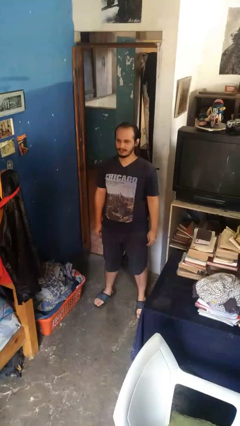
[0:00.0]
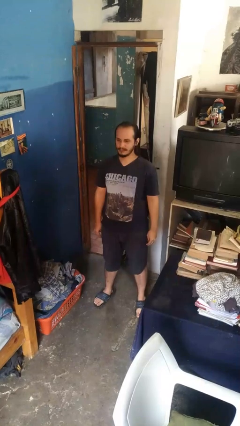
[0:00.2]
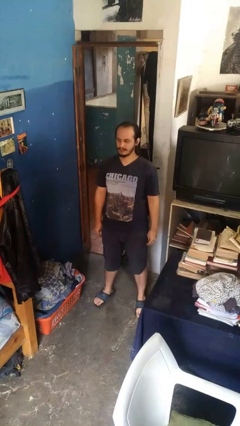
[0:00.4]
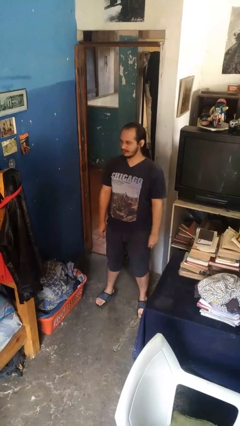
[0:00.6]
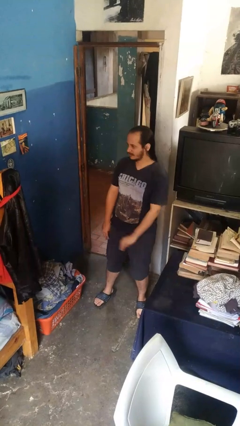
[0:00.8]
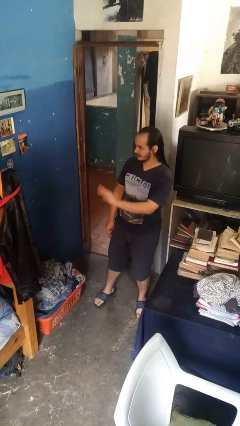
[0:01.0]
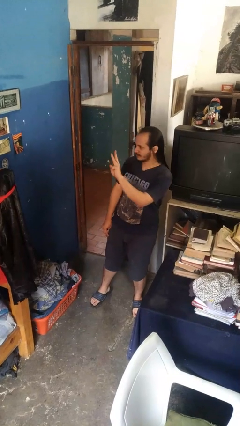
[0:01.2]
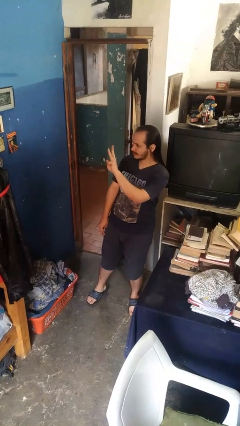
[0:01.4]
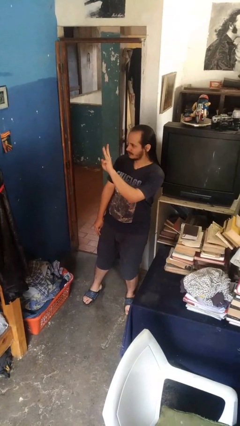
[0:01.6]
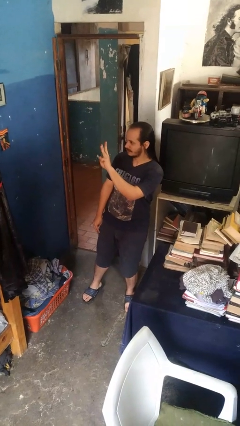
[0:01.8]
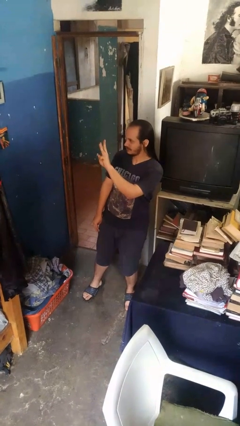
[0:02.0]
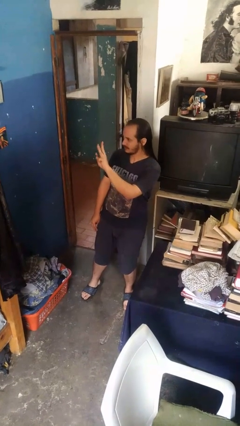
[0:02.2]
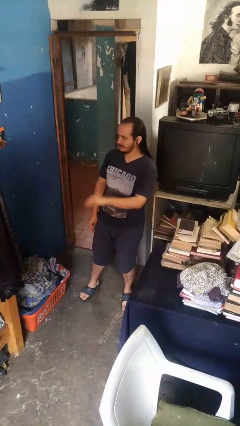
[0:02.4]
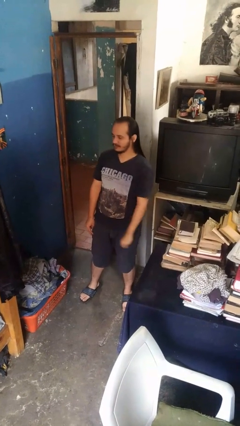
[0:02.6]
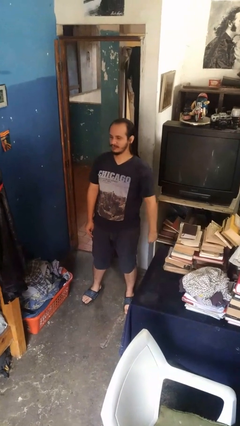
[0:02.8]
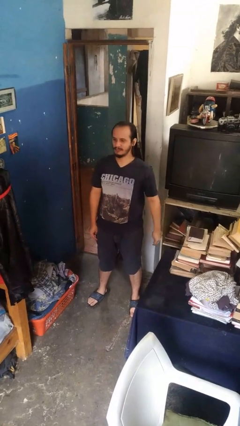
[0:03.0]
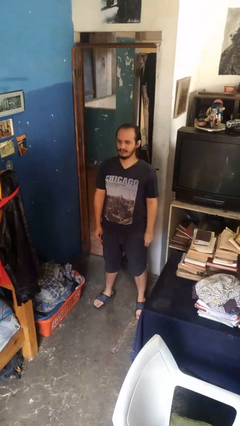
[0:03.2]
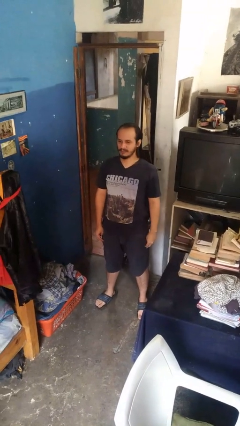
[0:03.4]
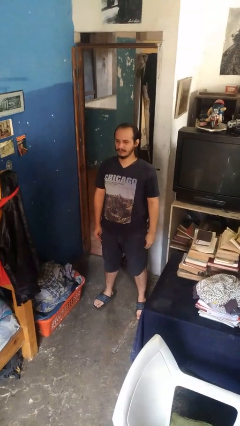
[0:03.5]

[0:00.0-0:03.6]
person gestures number three

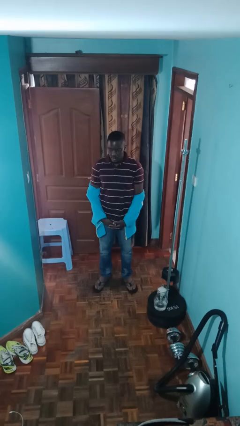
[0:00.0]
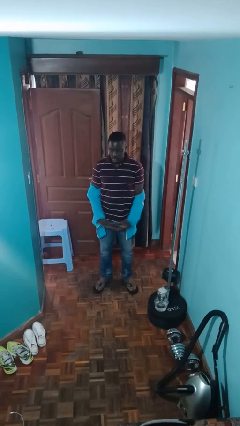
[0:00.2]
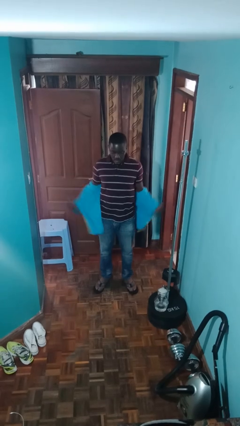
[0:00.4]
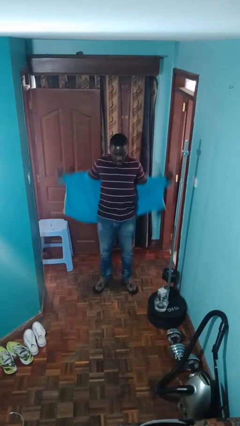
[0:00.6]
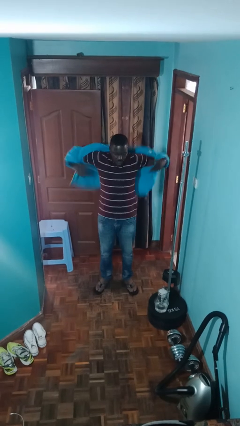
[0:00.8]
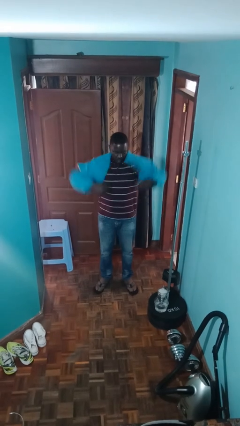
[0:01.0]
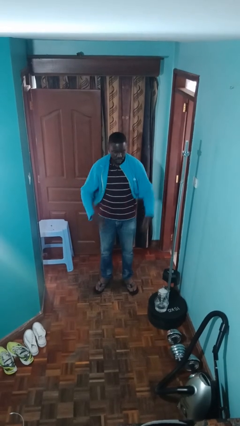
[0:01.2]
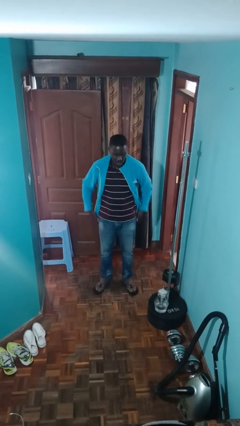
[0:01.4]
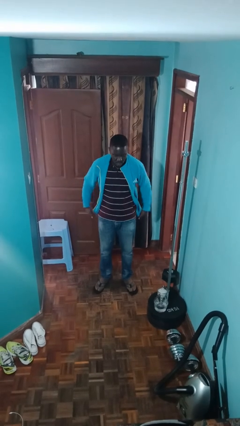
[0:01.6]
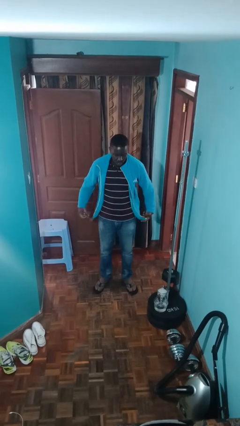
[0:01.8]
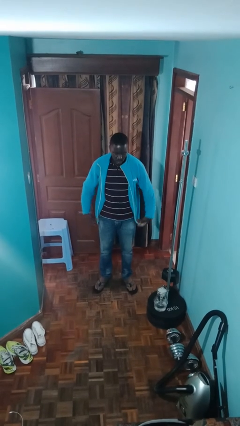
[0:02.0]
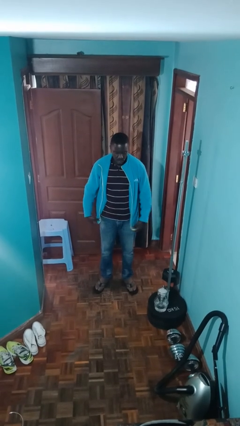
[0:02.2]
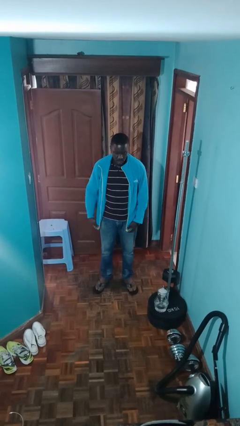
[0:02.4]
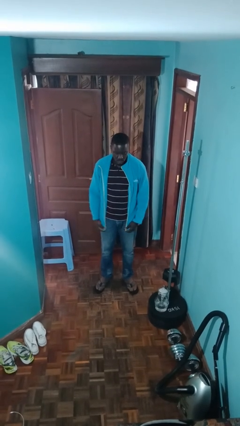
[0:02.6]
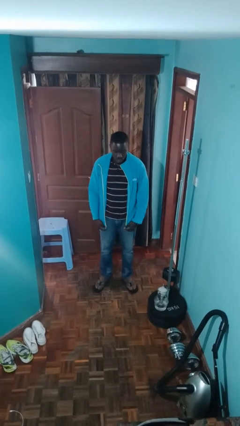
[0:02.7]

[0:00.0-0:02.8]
person puts on jacket

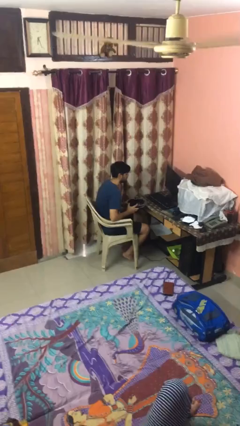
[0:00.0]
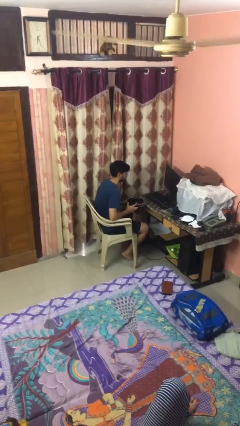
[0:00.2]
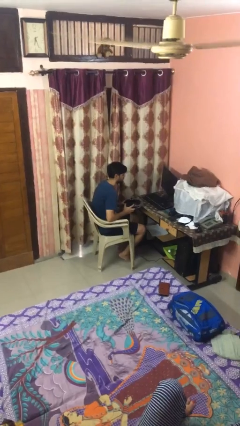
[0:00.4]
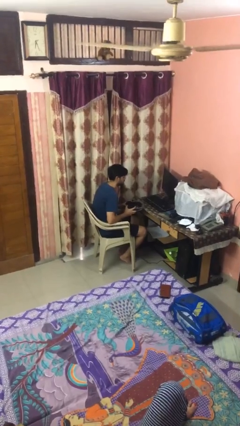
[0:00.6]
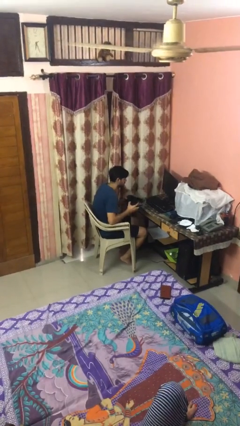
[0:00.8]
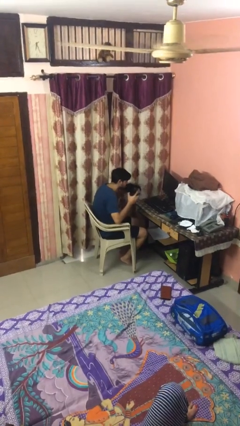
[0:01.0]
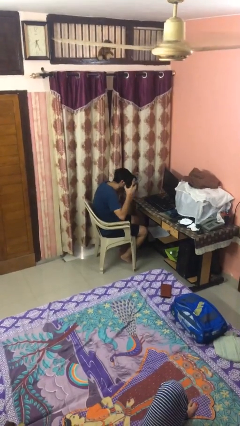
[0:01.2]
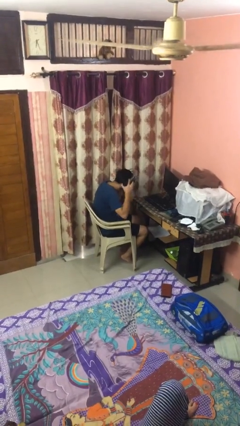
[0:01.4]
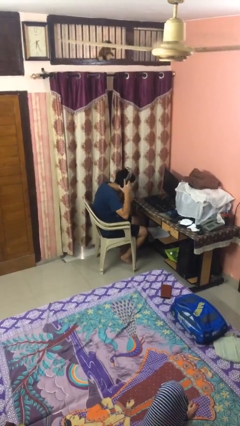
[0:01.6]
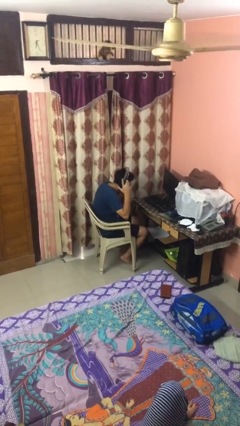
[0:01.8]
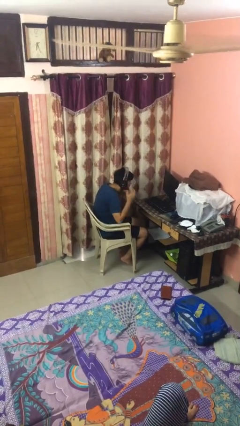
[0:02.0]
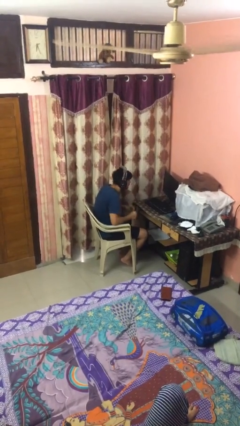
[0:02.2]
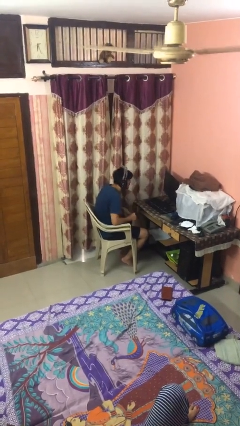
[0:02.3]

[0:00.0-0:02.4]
person puts on headphones

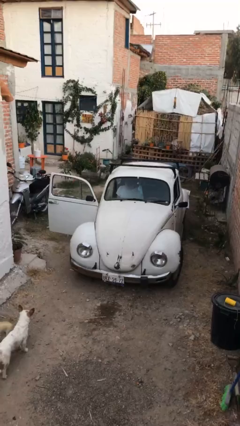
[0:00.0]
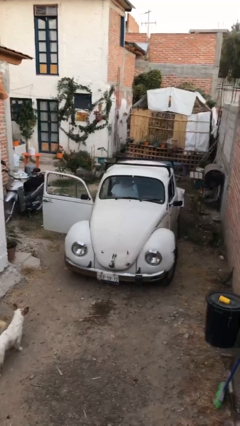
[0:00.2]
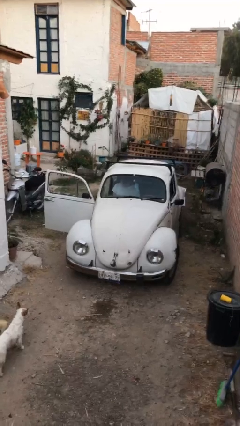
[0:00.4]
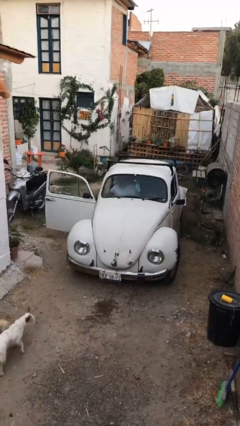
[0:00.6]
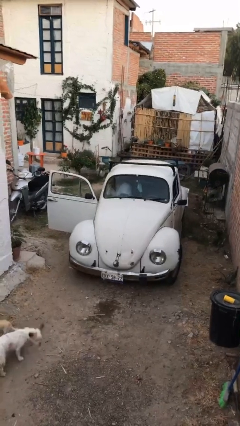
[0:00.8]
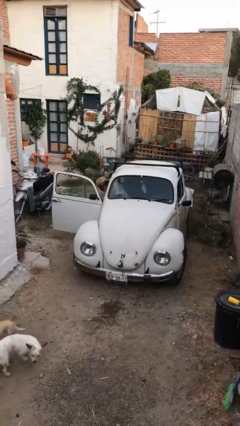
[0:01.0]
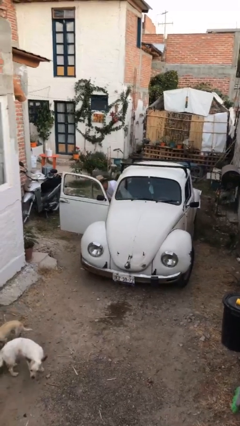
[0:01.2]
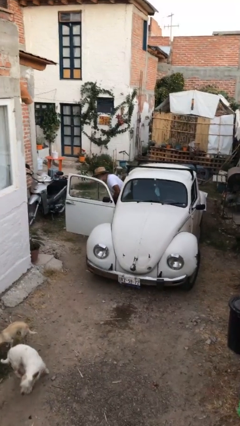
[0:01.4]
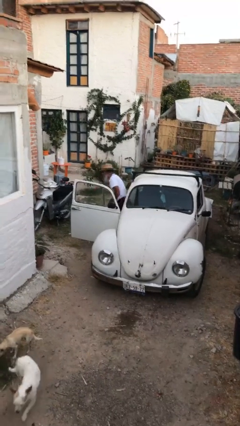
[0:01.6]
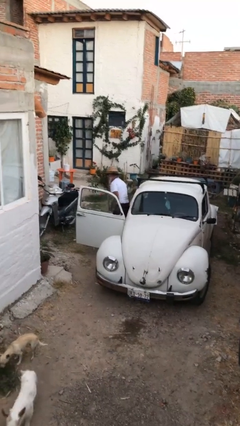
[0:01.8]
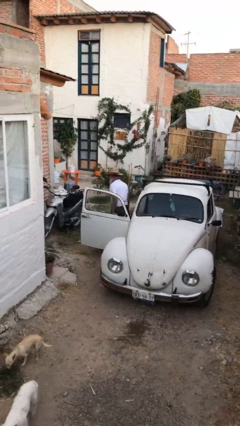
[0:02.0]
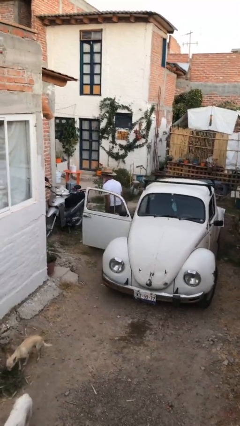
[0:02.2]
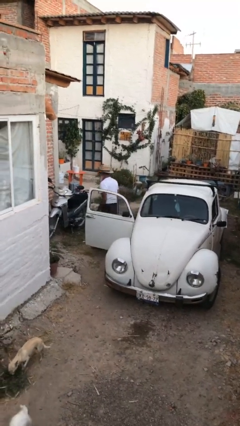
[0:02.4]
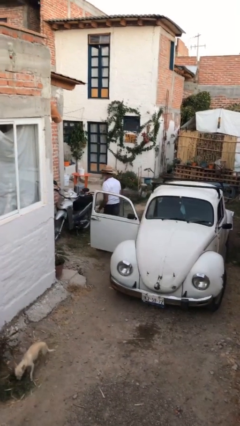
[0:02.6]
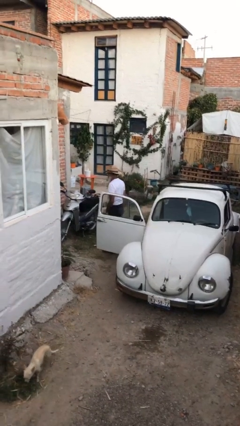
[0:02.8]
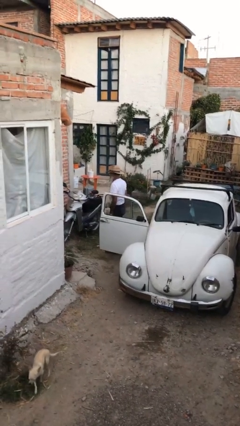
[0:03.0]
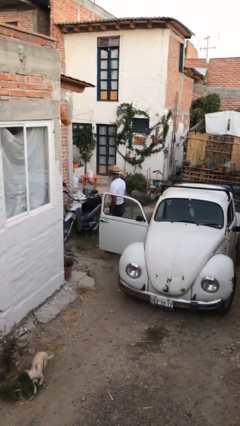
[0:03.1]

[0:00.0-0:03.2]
person exits car

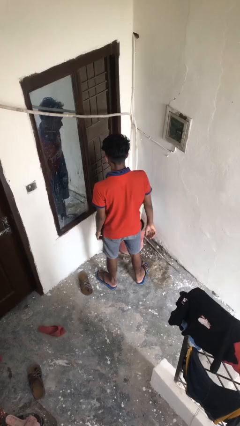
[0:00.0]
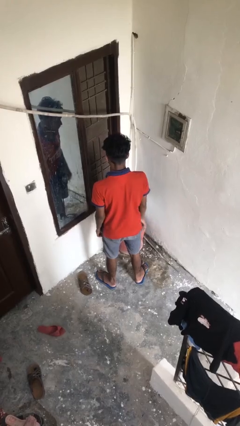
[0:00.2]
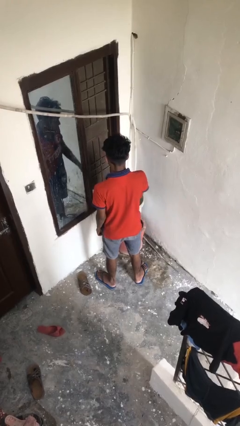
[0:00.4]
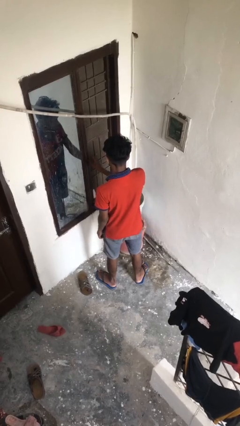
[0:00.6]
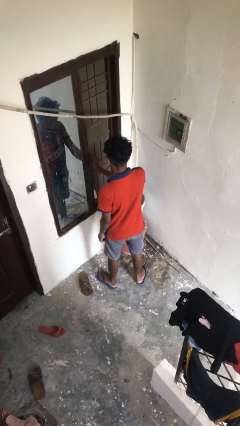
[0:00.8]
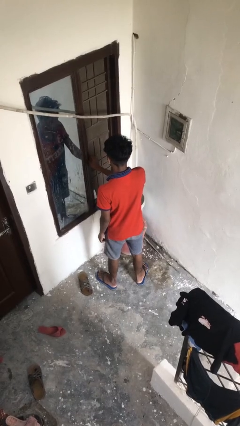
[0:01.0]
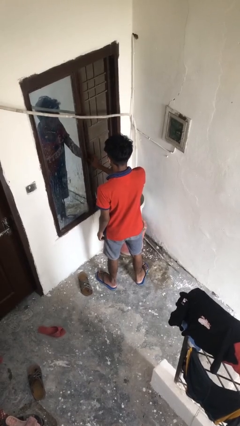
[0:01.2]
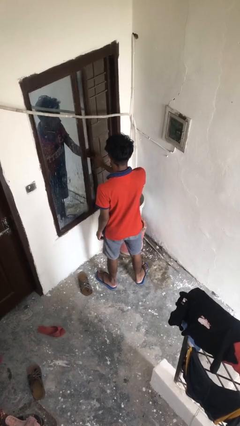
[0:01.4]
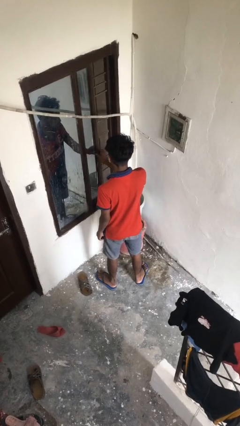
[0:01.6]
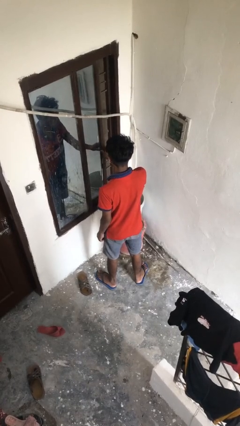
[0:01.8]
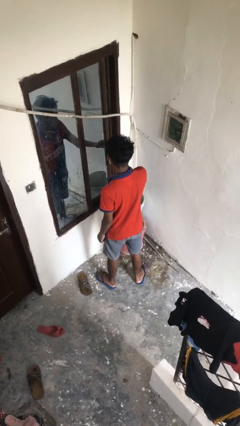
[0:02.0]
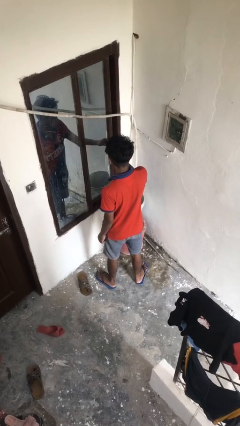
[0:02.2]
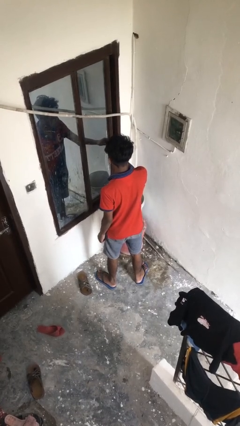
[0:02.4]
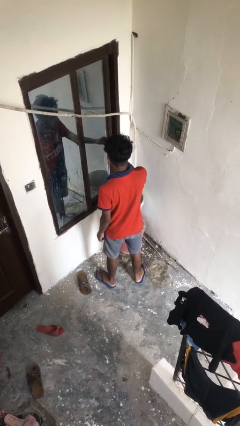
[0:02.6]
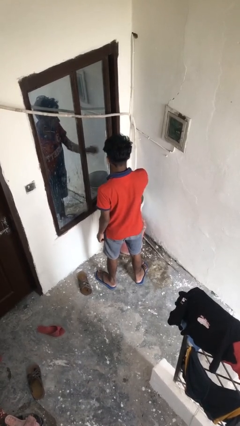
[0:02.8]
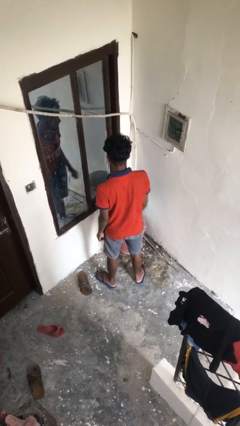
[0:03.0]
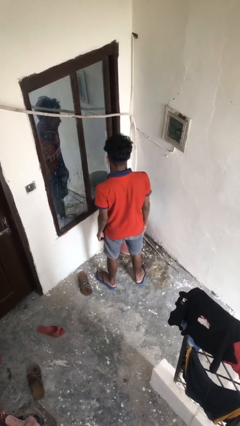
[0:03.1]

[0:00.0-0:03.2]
person closes home window

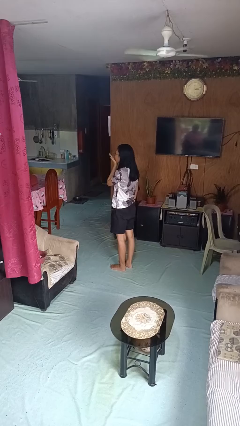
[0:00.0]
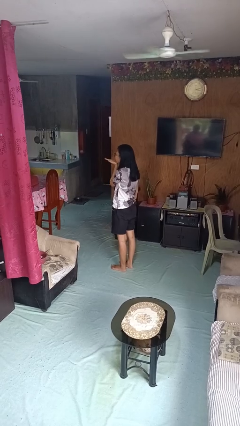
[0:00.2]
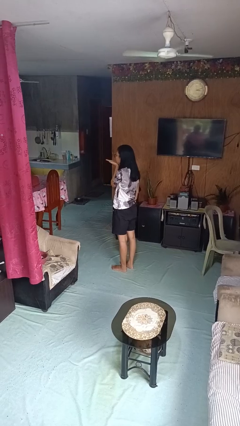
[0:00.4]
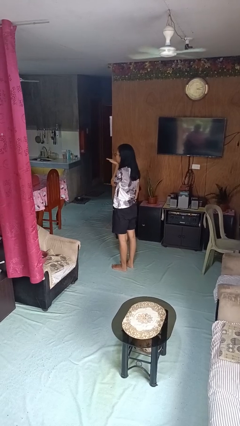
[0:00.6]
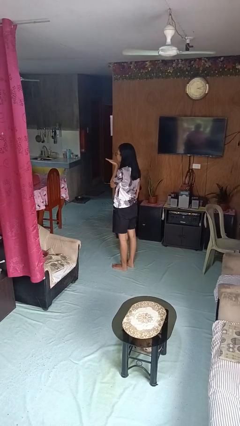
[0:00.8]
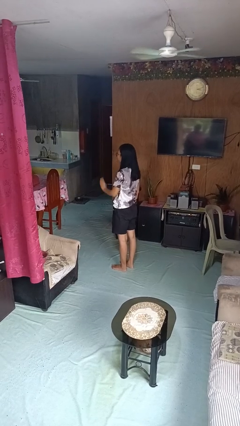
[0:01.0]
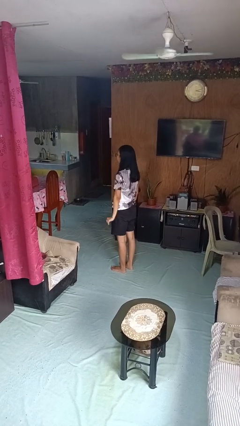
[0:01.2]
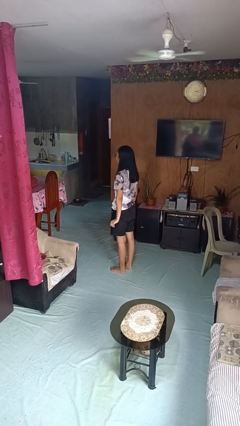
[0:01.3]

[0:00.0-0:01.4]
person gestures blow kiss

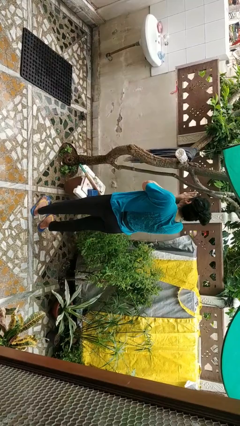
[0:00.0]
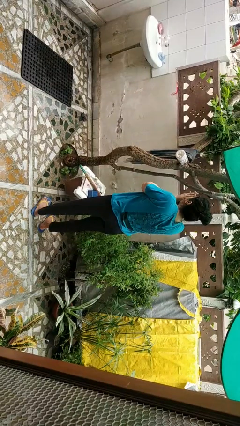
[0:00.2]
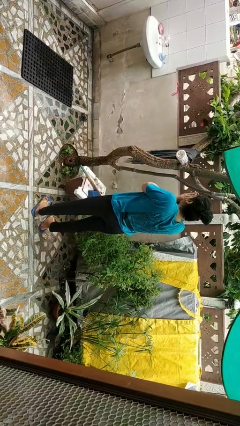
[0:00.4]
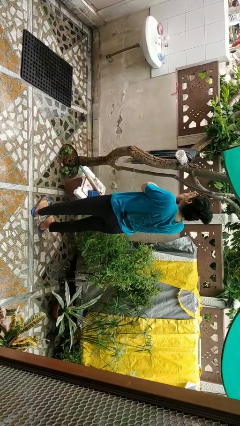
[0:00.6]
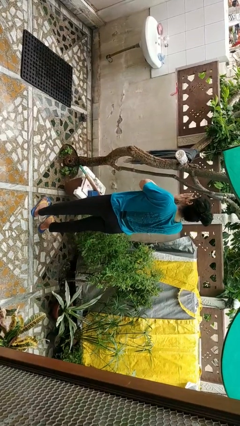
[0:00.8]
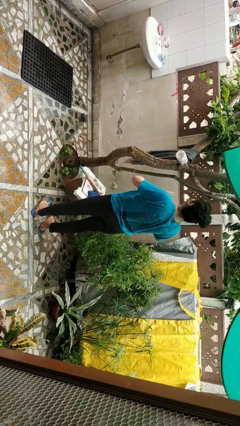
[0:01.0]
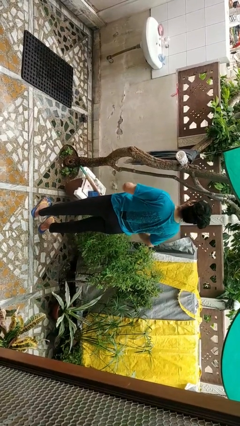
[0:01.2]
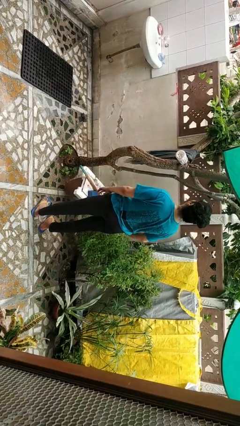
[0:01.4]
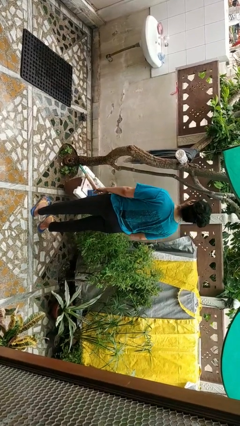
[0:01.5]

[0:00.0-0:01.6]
person blows into hands
